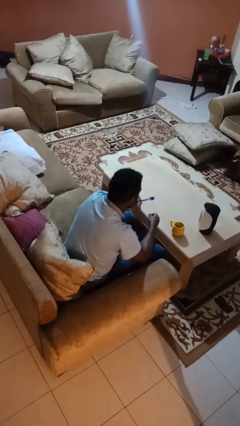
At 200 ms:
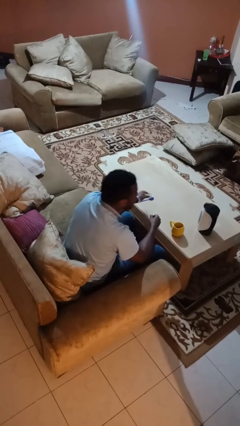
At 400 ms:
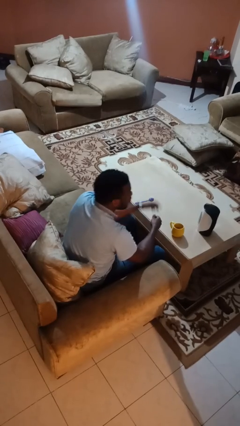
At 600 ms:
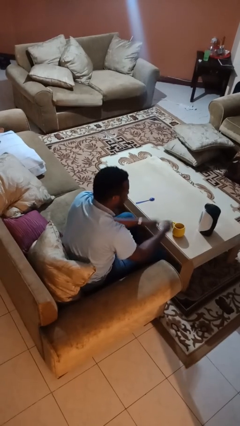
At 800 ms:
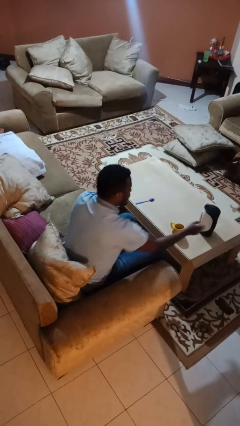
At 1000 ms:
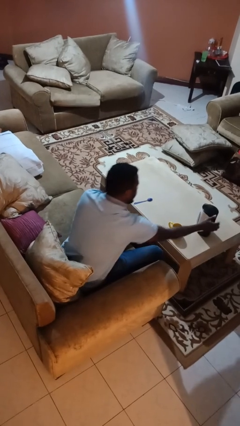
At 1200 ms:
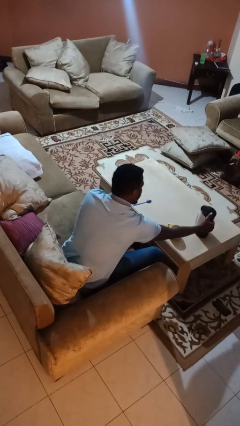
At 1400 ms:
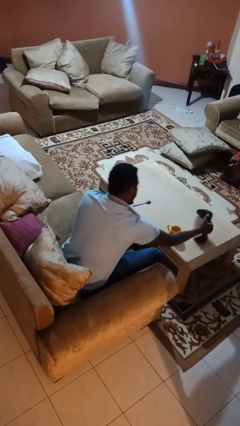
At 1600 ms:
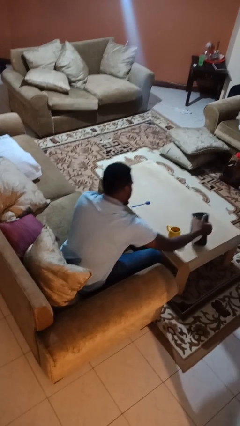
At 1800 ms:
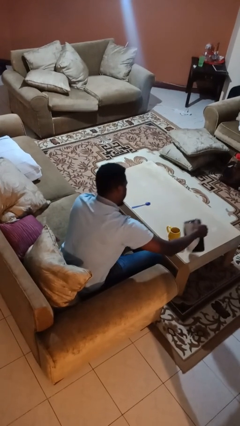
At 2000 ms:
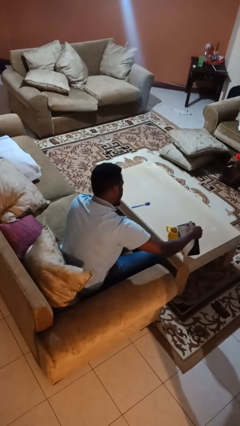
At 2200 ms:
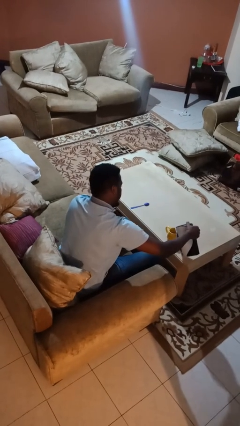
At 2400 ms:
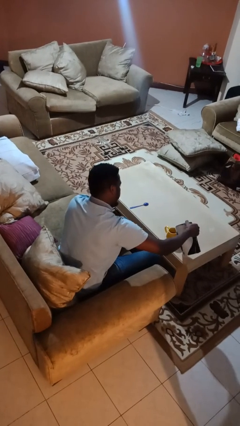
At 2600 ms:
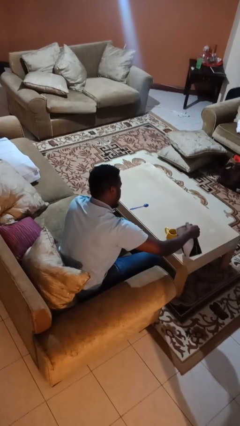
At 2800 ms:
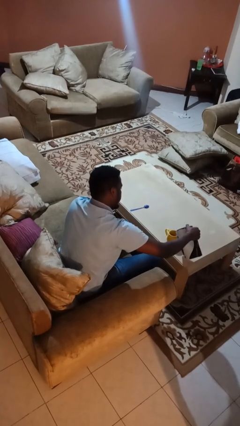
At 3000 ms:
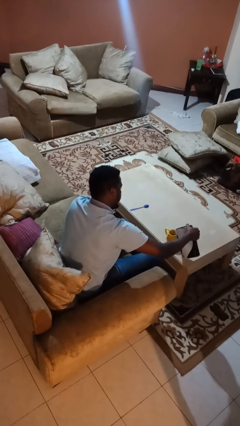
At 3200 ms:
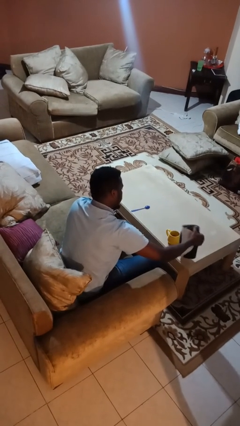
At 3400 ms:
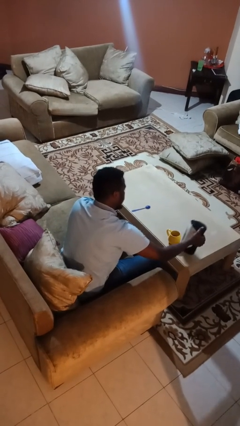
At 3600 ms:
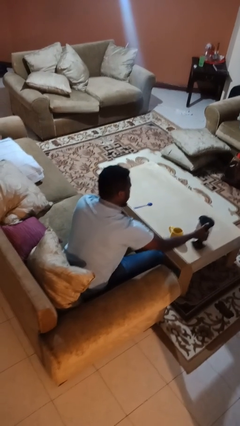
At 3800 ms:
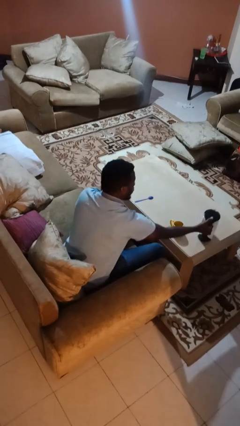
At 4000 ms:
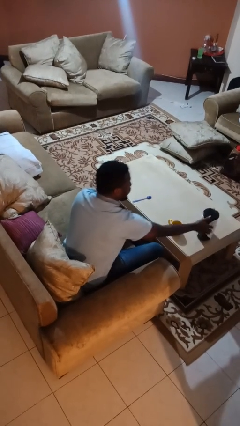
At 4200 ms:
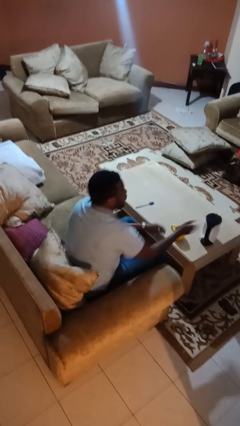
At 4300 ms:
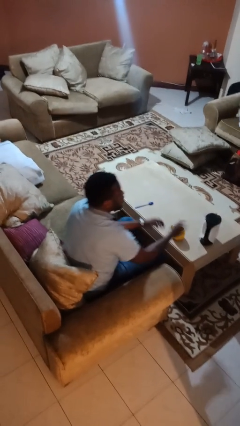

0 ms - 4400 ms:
person pours coffee into mug

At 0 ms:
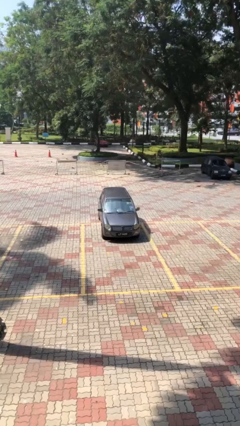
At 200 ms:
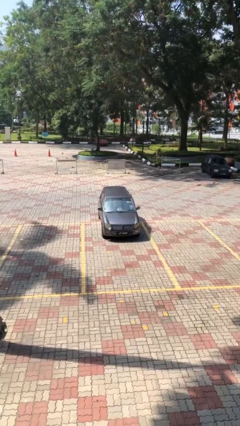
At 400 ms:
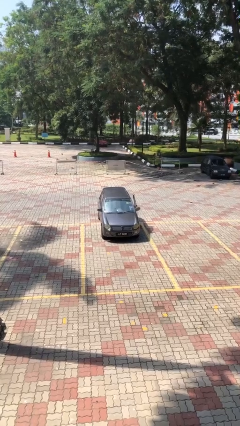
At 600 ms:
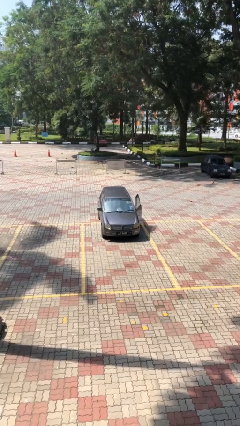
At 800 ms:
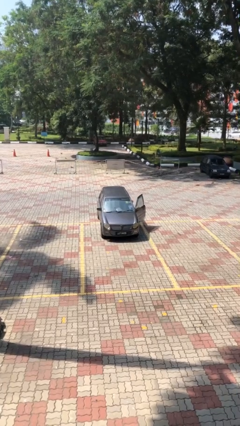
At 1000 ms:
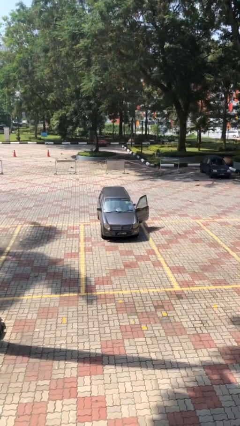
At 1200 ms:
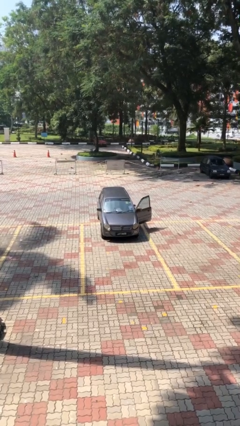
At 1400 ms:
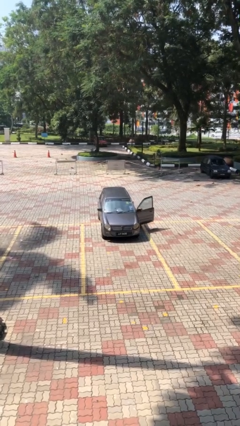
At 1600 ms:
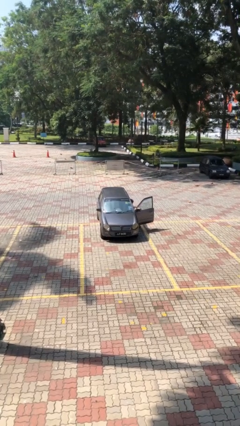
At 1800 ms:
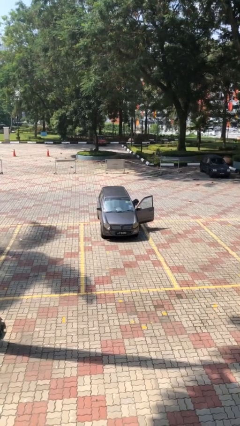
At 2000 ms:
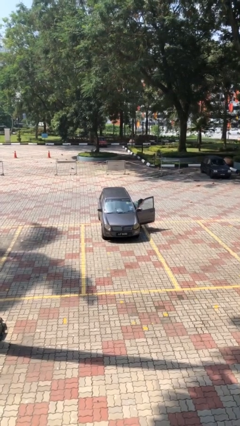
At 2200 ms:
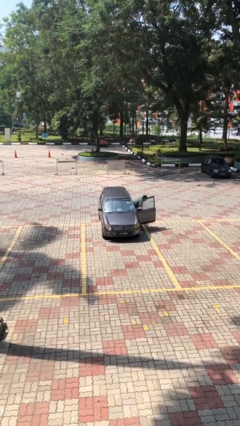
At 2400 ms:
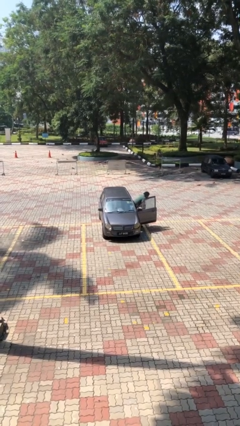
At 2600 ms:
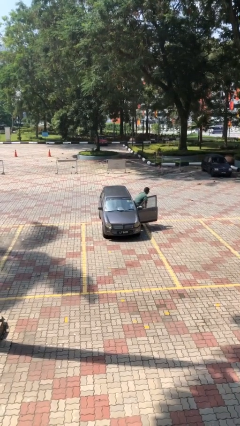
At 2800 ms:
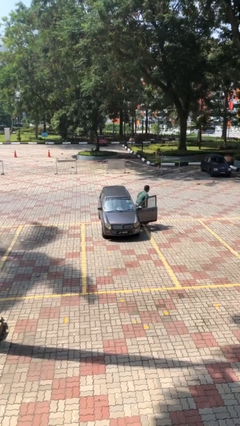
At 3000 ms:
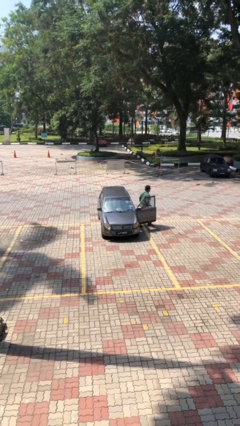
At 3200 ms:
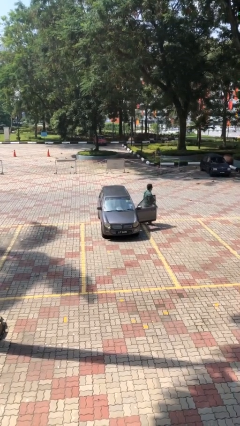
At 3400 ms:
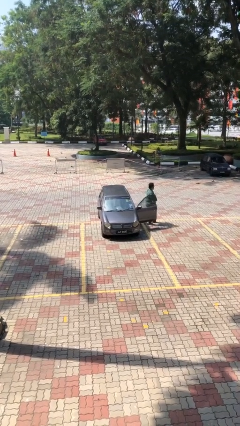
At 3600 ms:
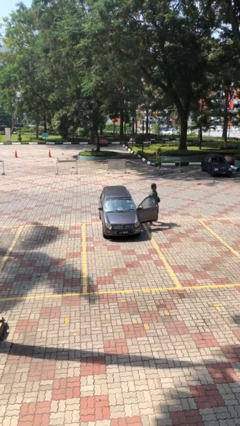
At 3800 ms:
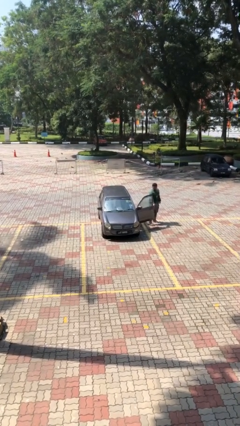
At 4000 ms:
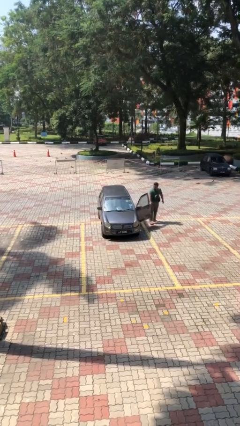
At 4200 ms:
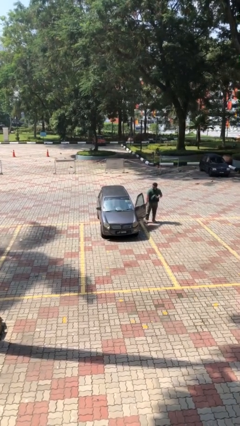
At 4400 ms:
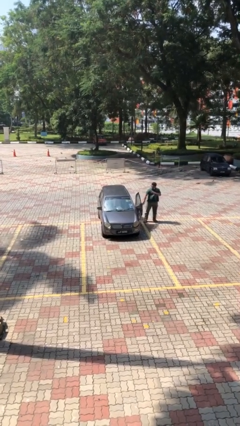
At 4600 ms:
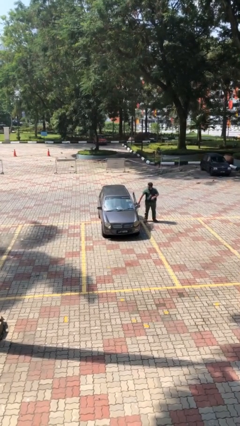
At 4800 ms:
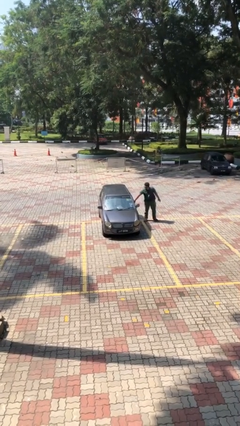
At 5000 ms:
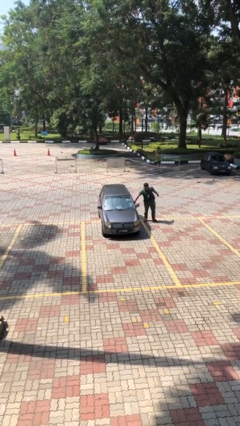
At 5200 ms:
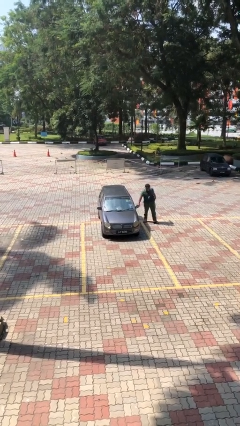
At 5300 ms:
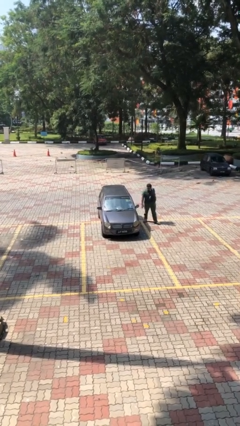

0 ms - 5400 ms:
car drops off person

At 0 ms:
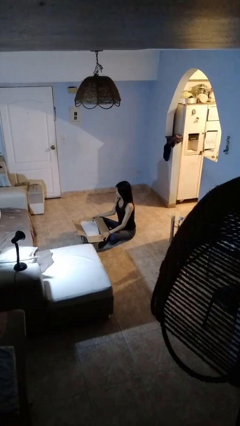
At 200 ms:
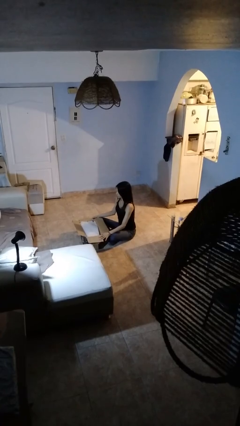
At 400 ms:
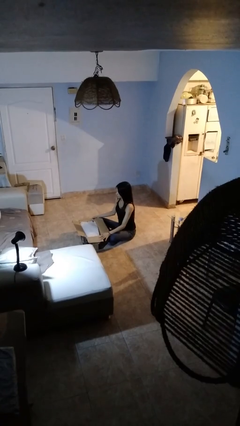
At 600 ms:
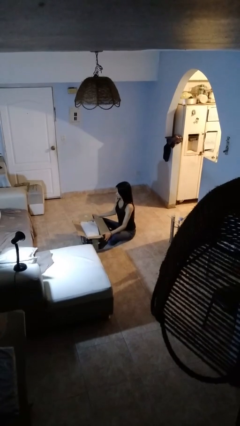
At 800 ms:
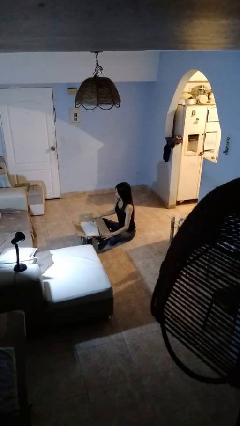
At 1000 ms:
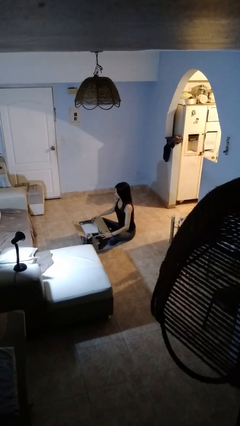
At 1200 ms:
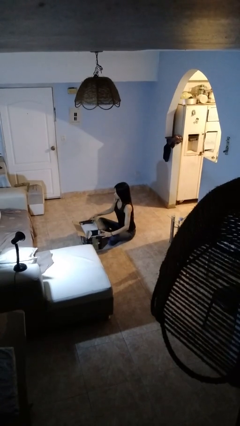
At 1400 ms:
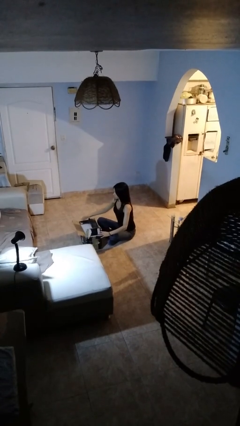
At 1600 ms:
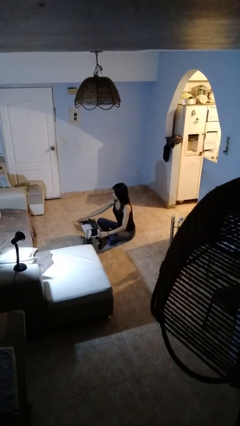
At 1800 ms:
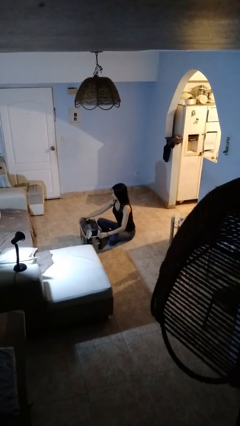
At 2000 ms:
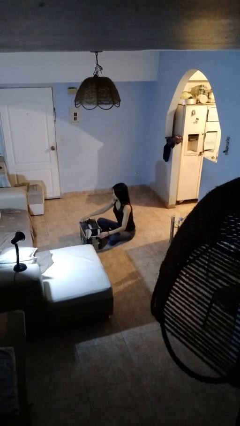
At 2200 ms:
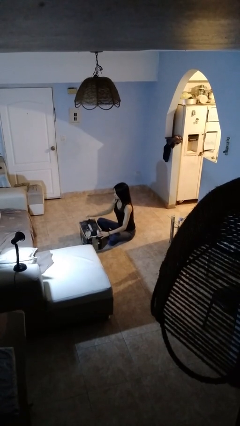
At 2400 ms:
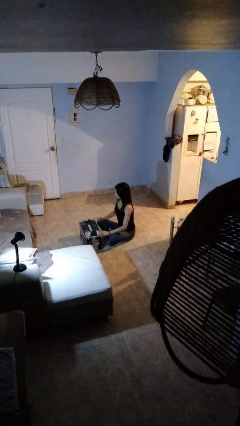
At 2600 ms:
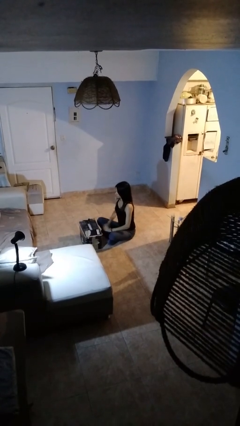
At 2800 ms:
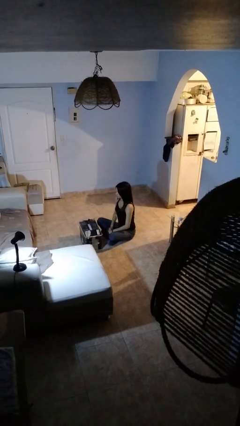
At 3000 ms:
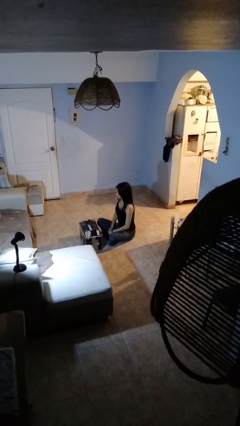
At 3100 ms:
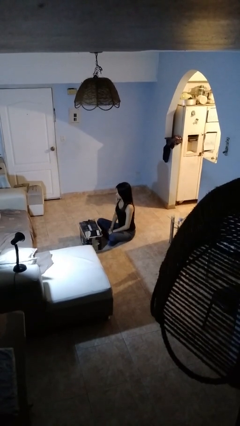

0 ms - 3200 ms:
person closes box

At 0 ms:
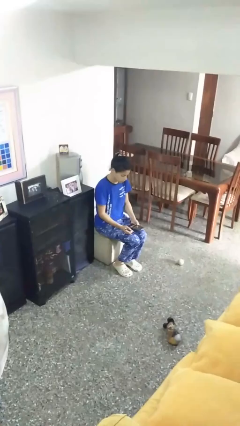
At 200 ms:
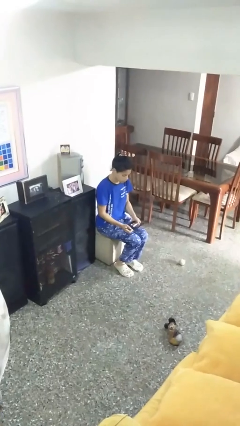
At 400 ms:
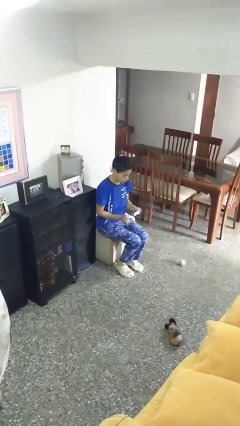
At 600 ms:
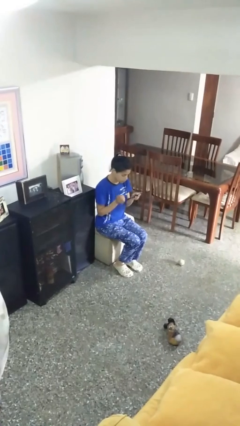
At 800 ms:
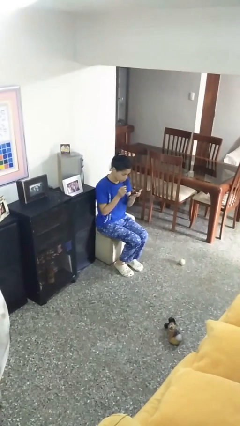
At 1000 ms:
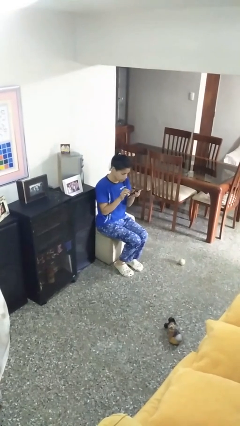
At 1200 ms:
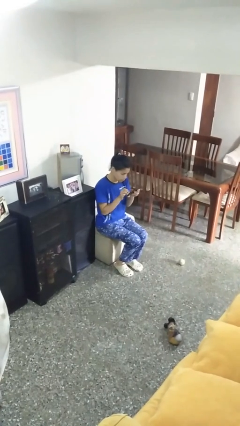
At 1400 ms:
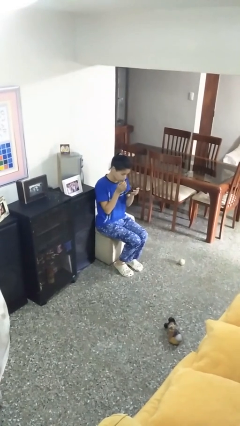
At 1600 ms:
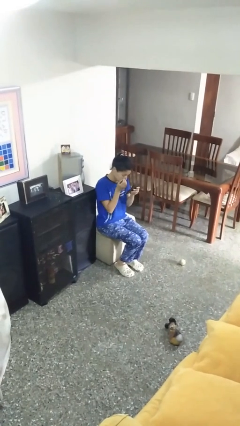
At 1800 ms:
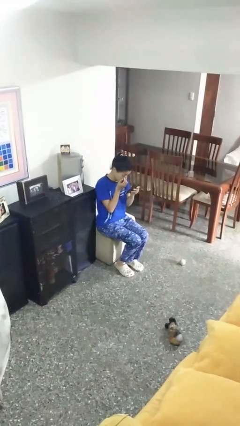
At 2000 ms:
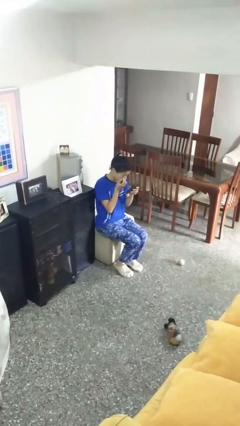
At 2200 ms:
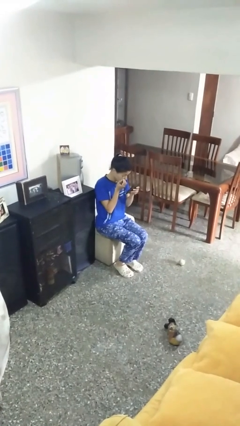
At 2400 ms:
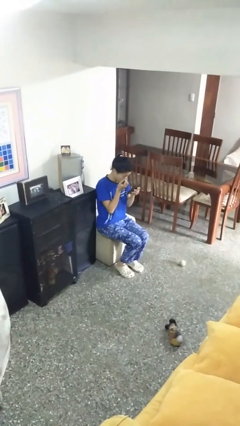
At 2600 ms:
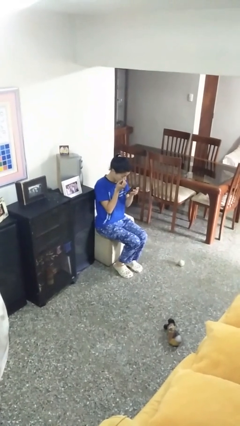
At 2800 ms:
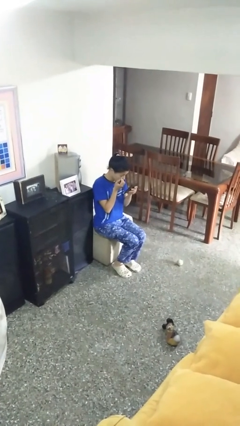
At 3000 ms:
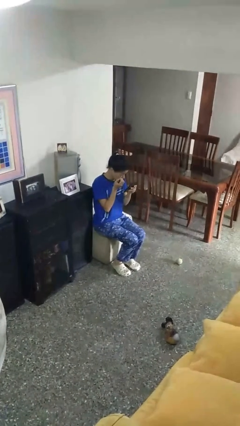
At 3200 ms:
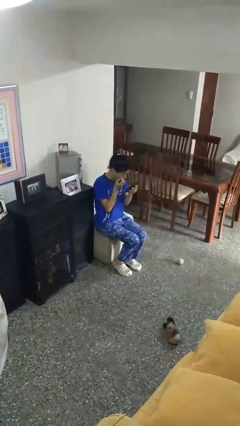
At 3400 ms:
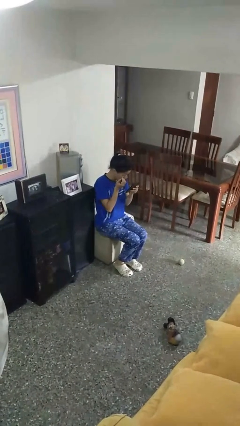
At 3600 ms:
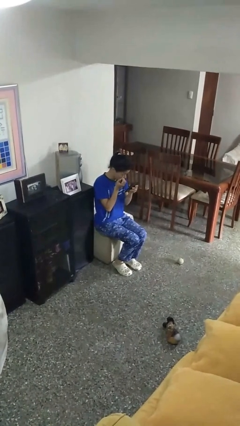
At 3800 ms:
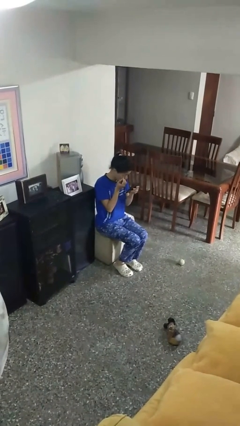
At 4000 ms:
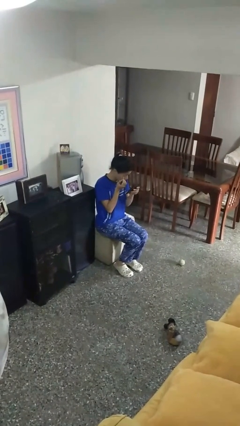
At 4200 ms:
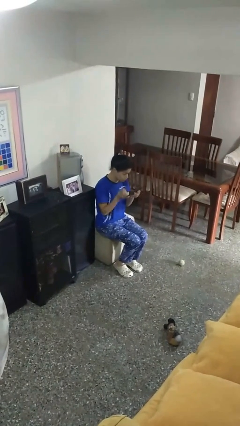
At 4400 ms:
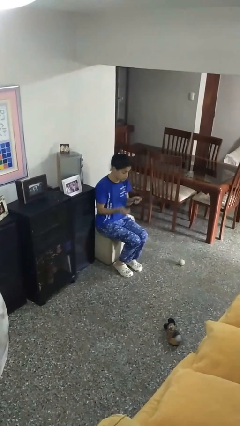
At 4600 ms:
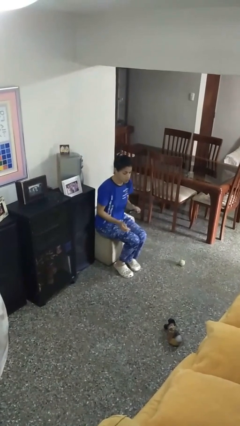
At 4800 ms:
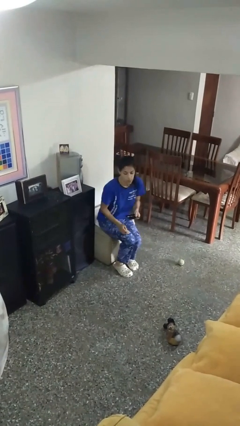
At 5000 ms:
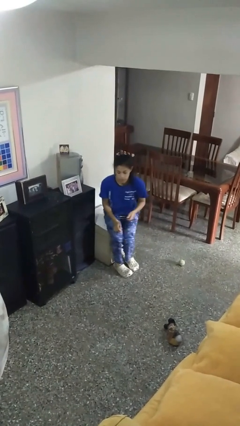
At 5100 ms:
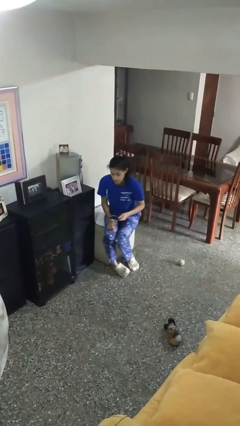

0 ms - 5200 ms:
person applies eye makeup
